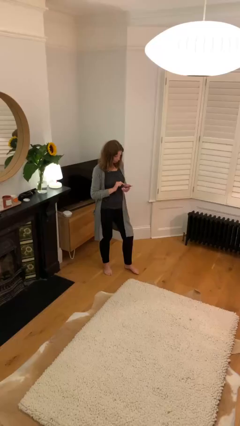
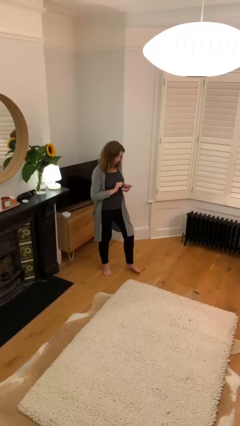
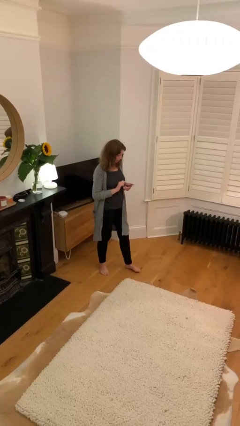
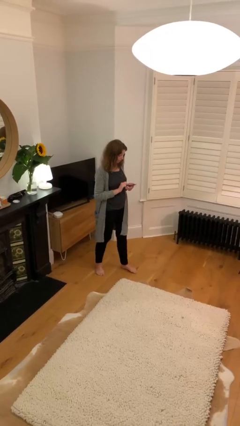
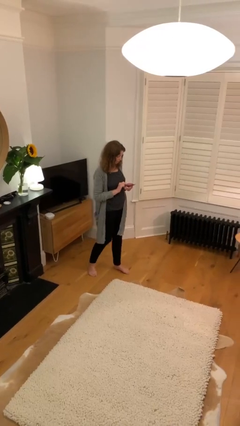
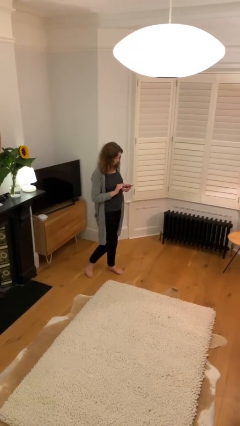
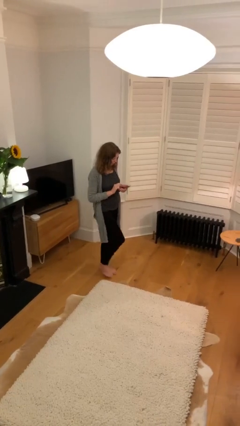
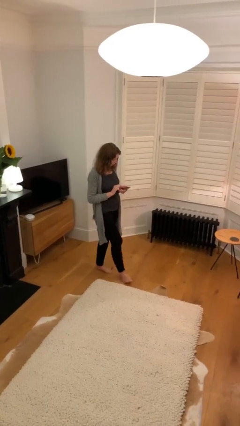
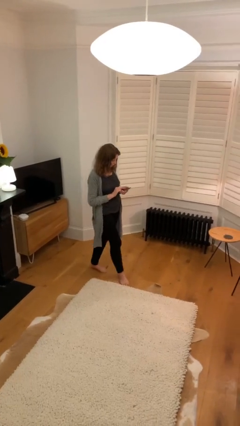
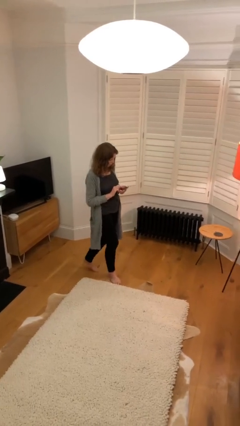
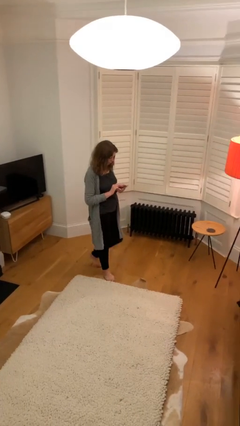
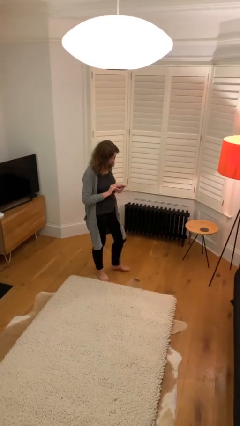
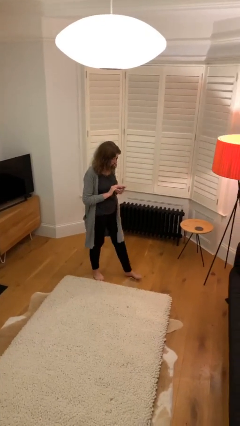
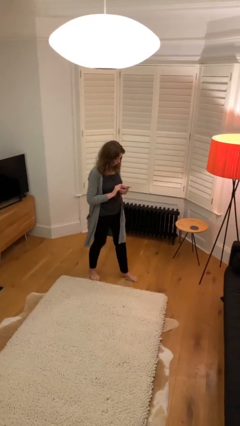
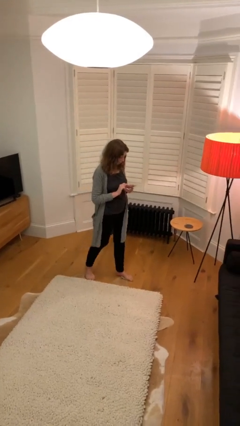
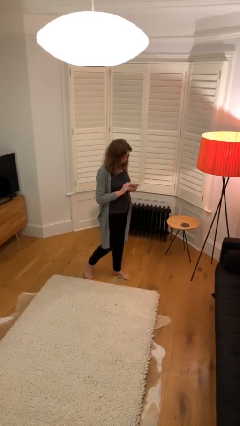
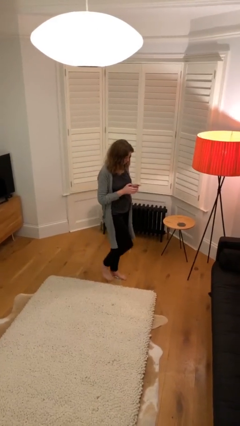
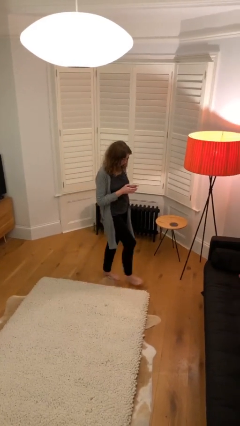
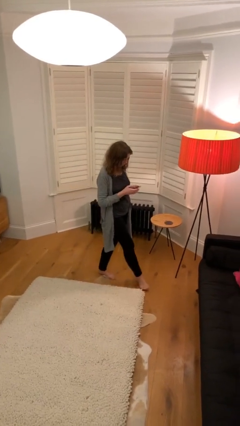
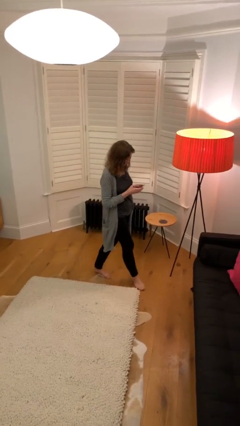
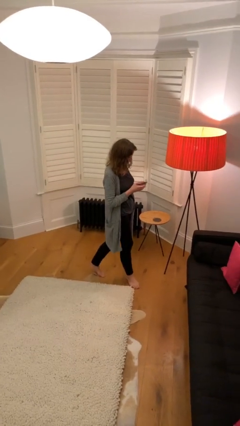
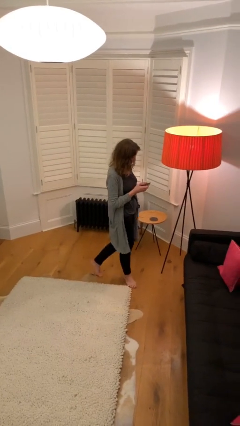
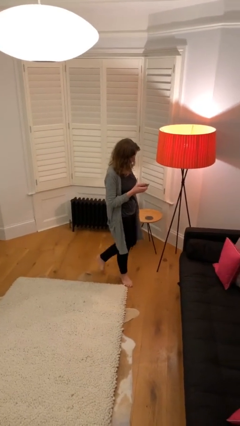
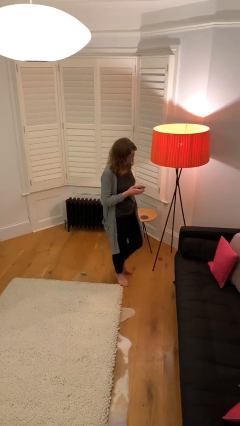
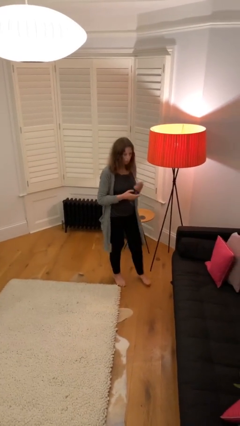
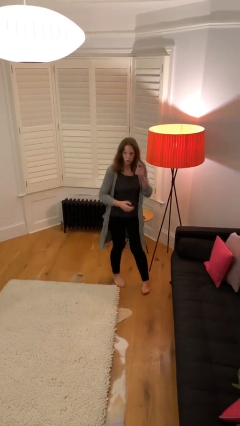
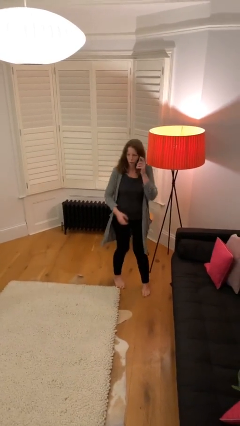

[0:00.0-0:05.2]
person texts on phone

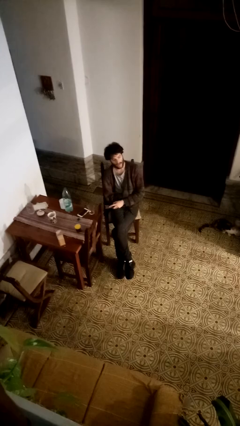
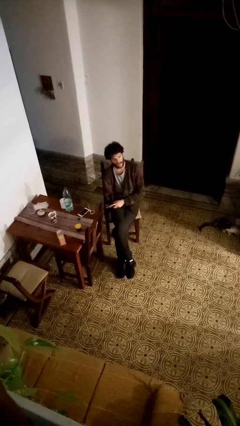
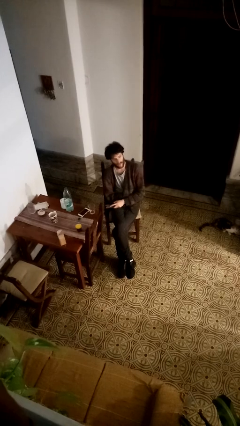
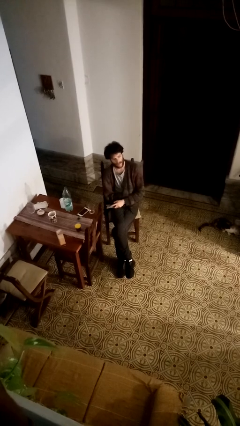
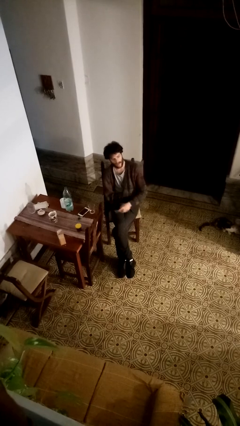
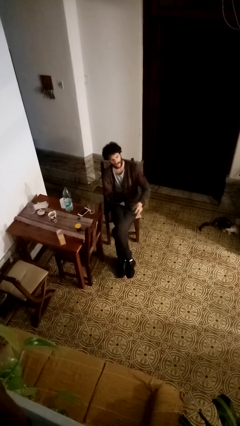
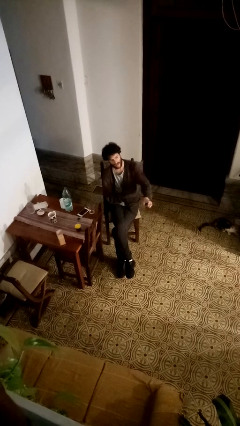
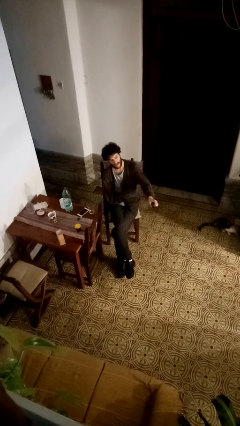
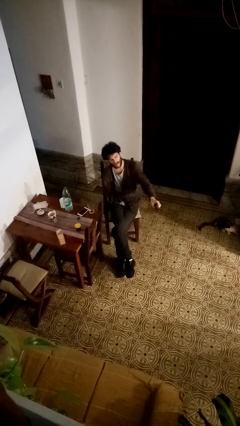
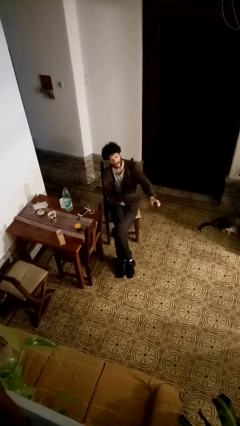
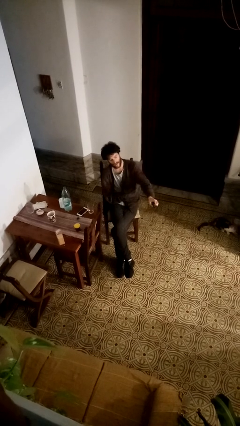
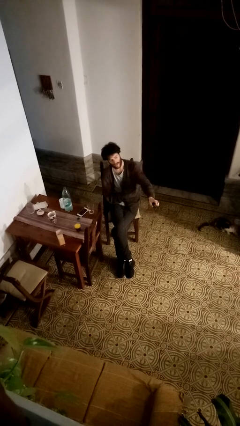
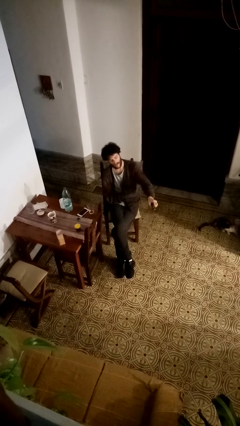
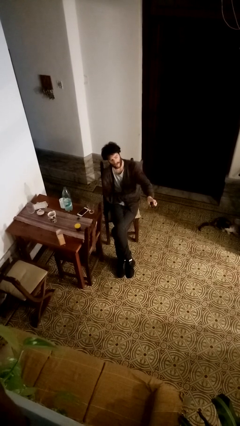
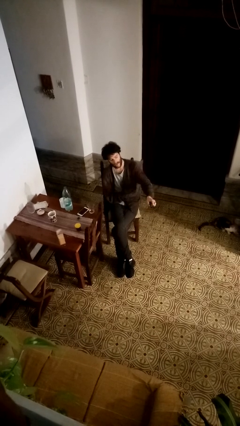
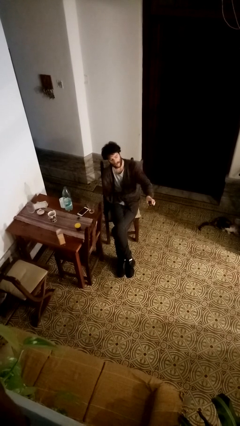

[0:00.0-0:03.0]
person uses television remote

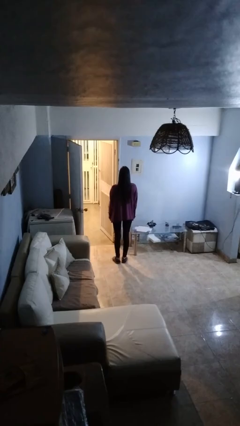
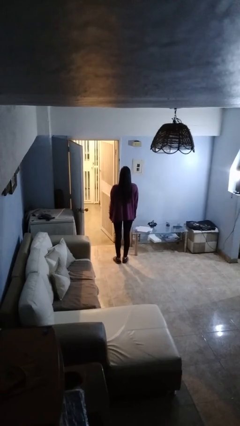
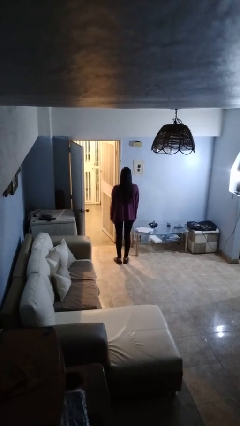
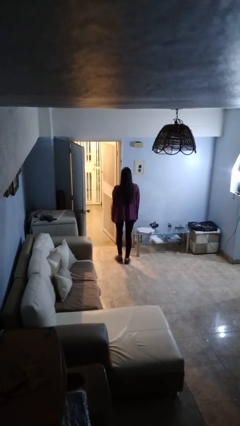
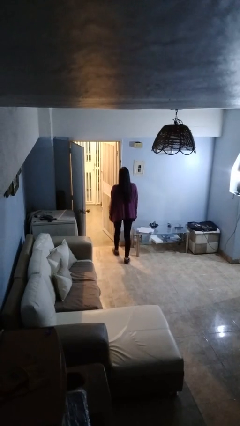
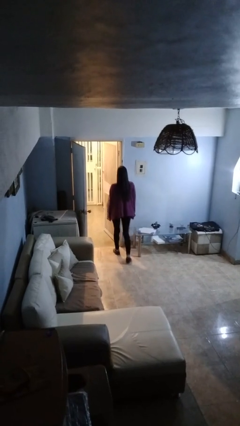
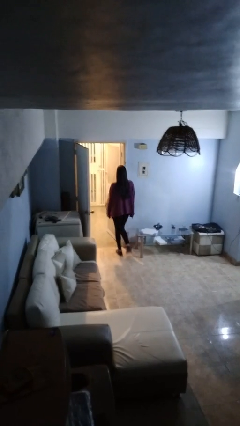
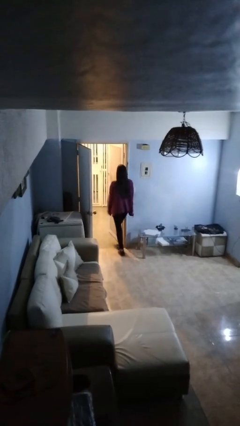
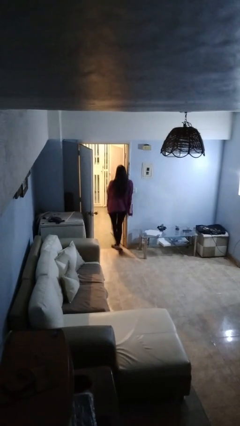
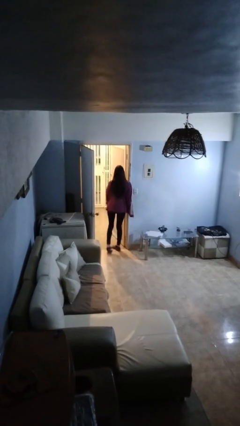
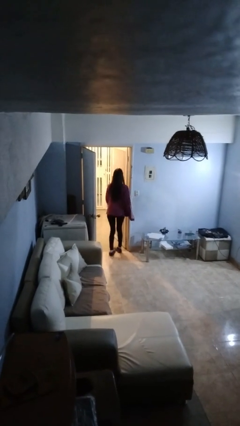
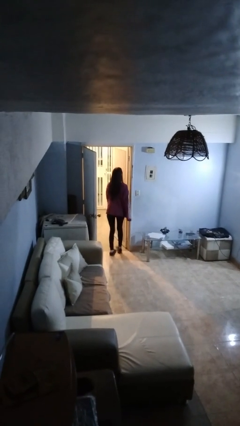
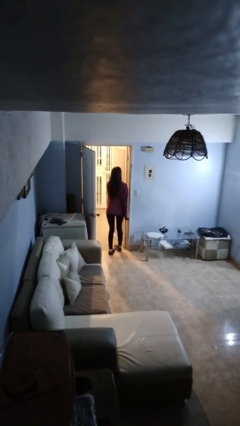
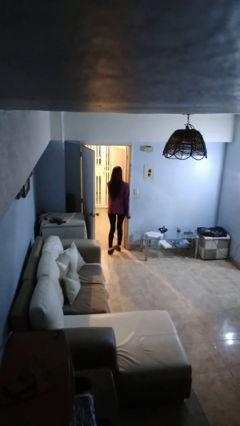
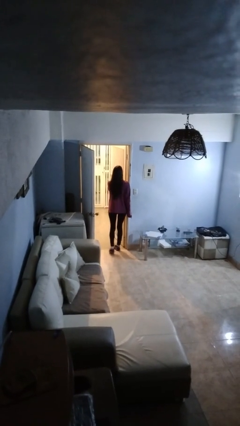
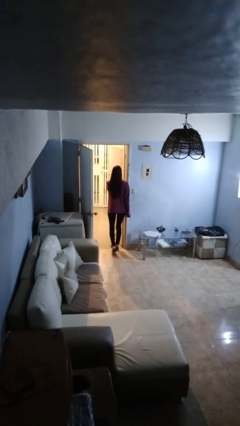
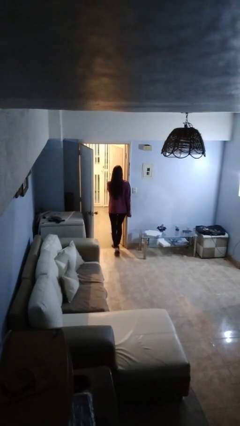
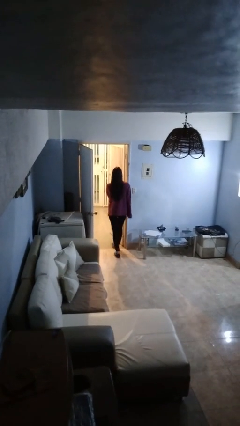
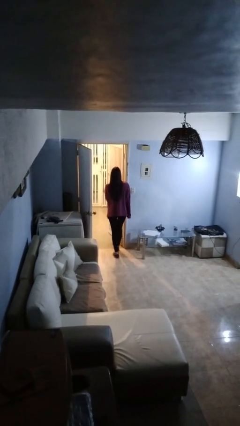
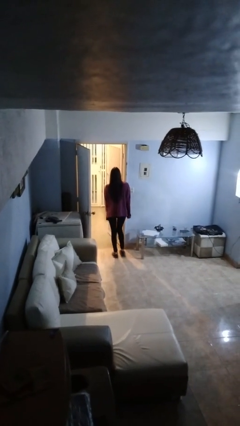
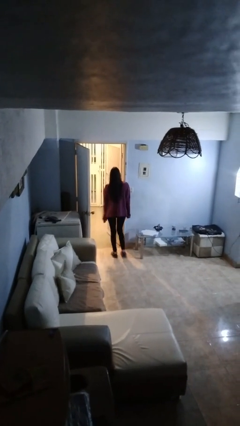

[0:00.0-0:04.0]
person bumps into wall

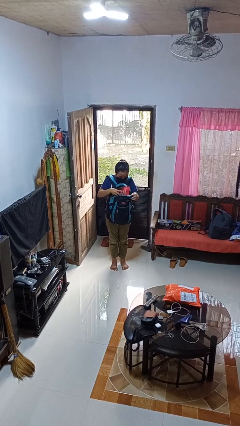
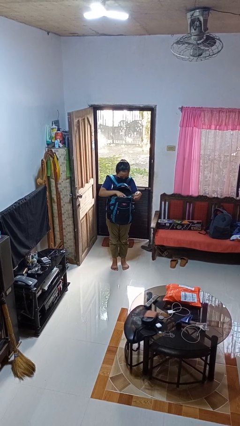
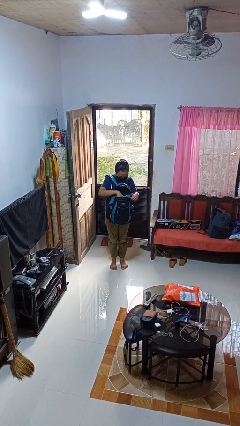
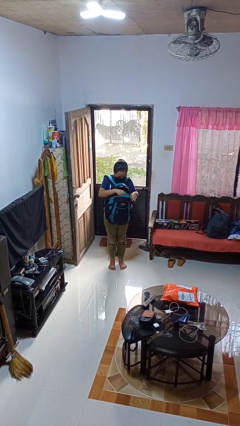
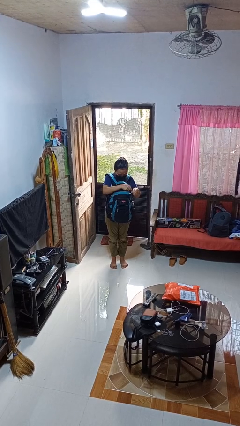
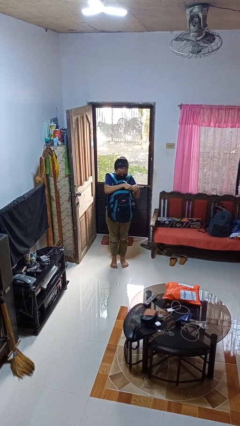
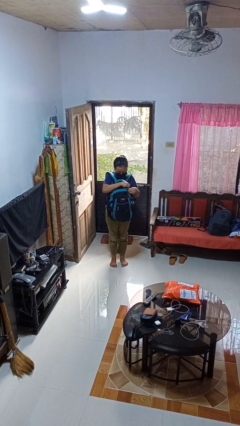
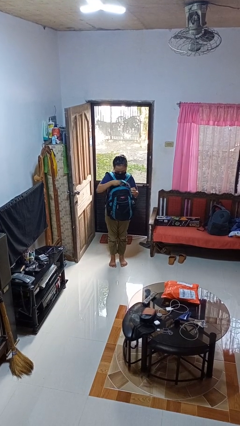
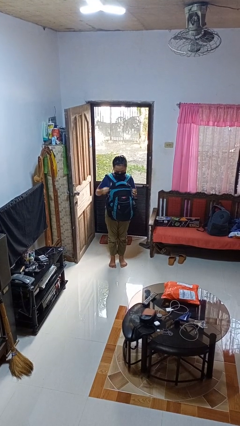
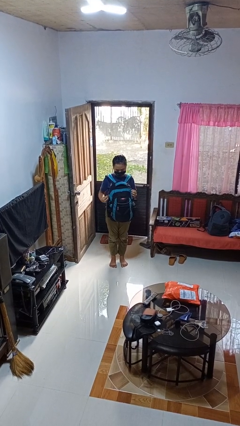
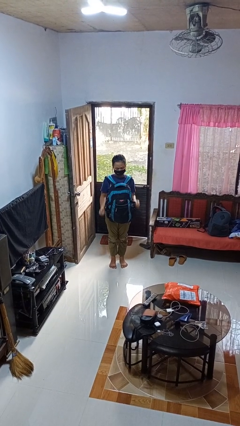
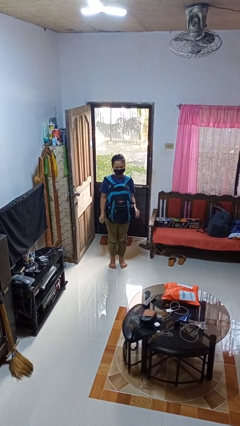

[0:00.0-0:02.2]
person puts object into backpack

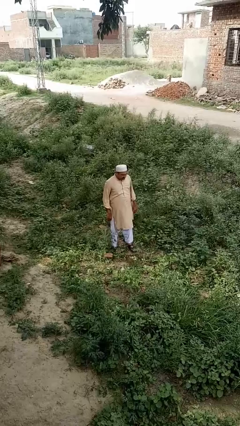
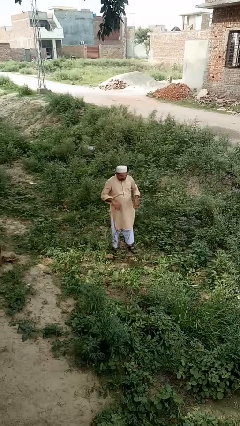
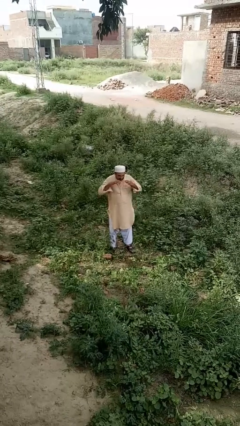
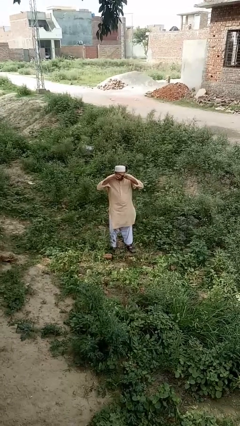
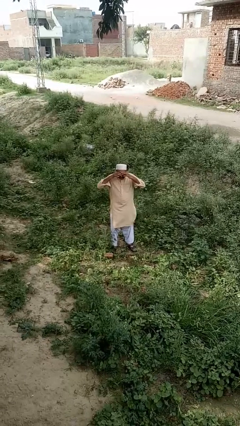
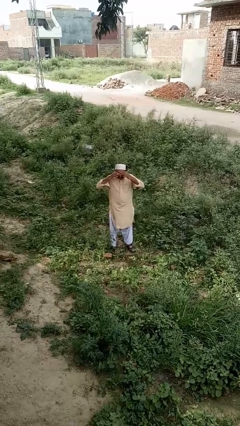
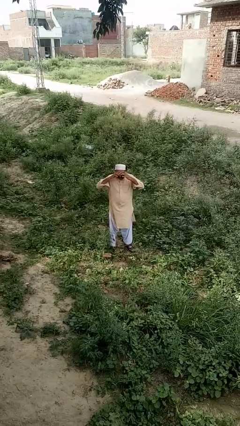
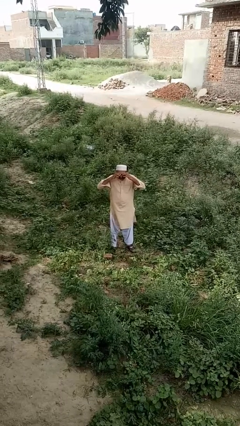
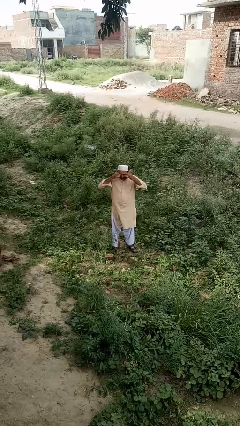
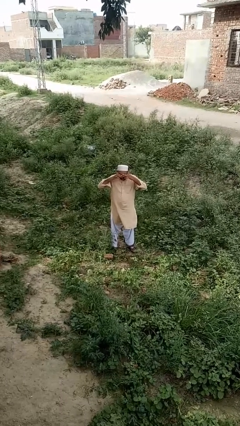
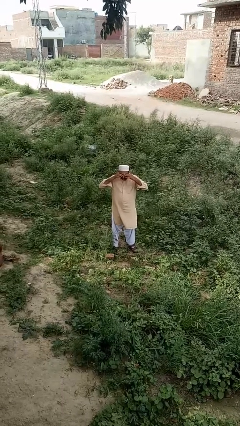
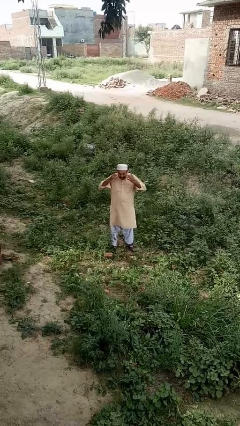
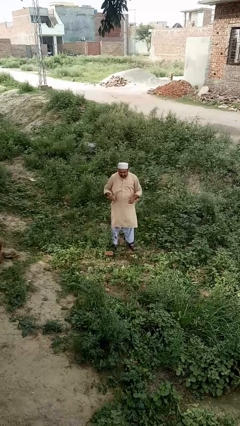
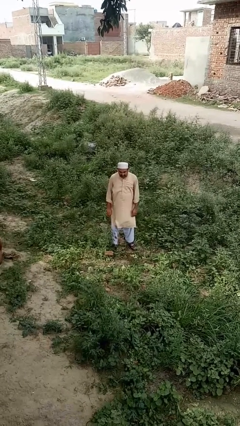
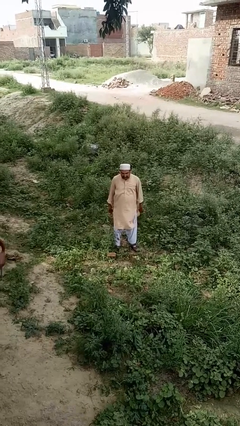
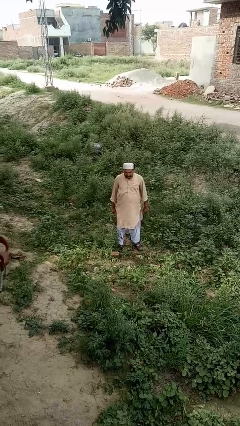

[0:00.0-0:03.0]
person rubs eyes

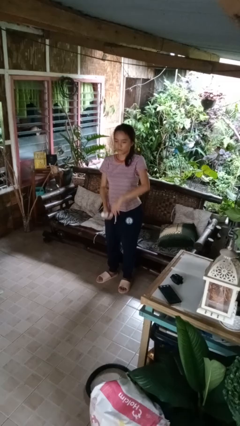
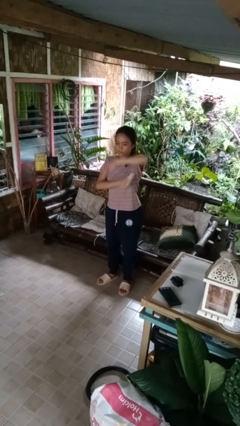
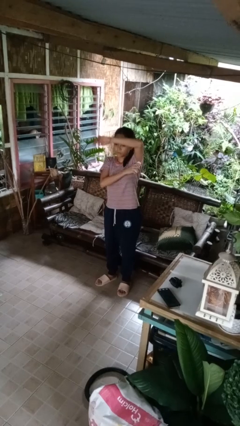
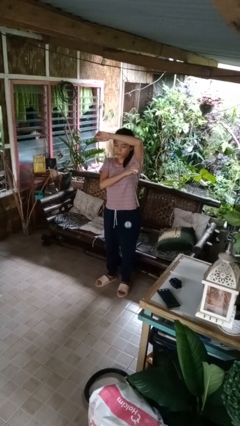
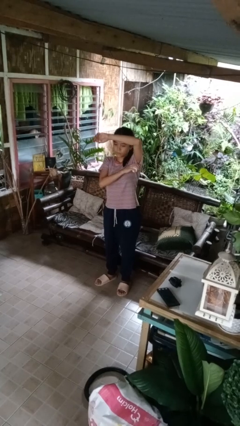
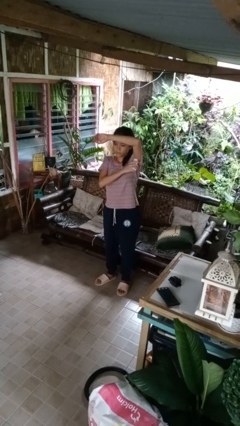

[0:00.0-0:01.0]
person applies deodorant
